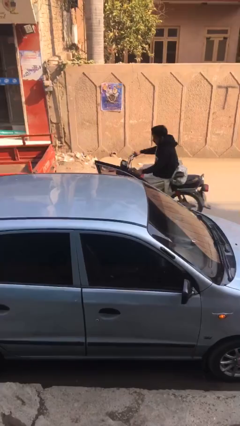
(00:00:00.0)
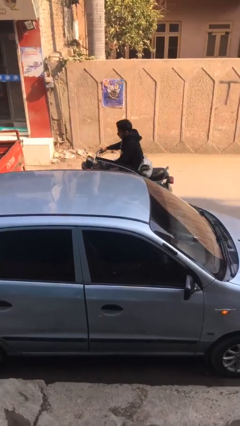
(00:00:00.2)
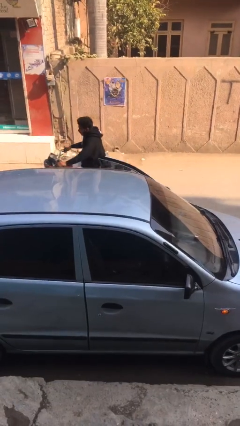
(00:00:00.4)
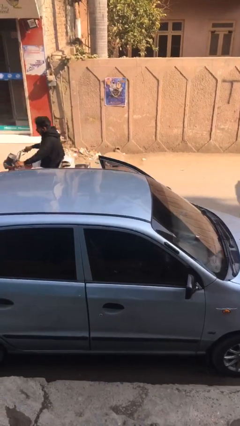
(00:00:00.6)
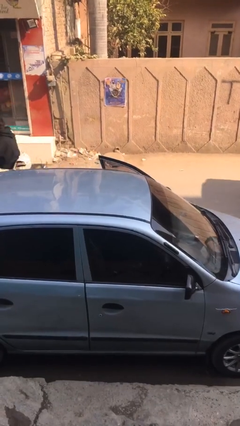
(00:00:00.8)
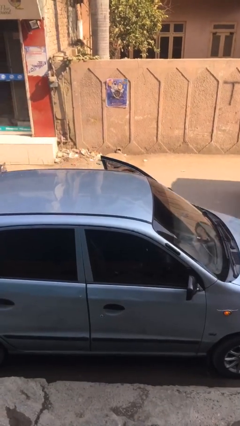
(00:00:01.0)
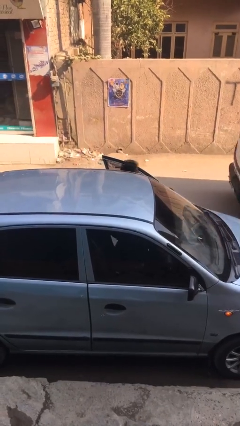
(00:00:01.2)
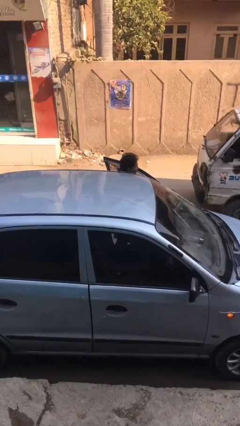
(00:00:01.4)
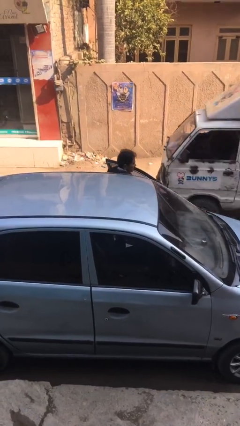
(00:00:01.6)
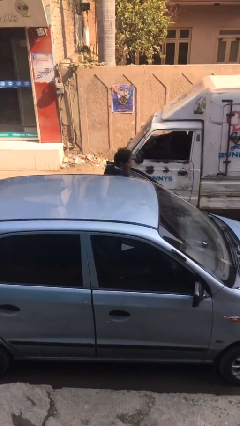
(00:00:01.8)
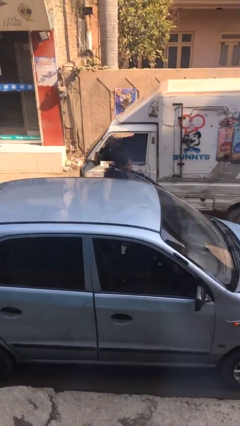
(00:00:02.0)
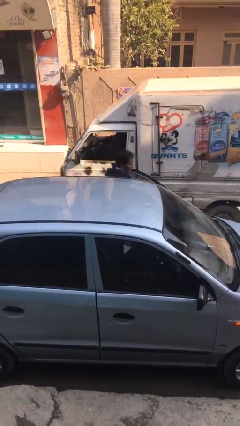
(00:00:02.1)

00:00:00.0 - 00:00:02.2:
person exits car

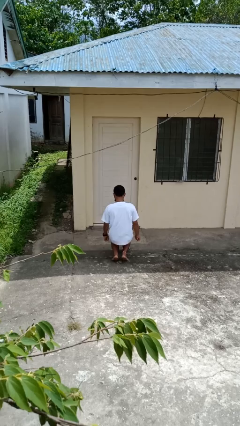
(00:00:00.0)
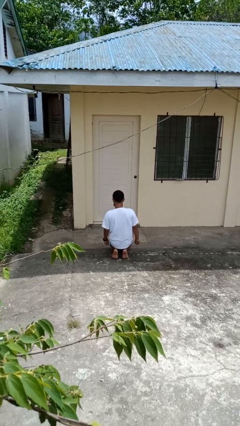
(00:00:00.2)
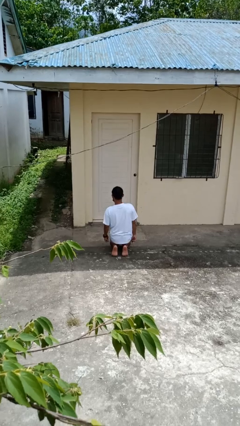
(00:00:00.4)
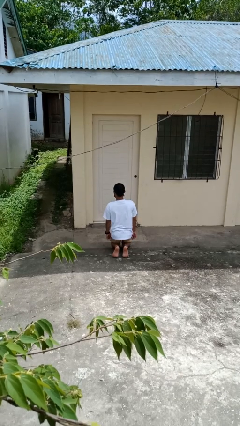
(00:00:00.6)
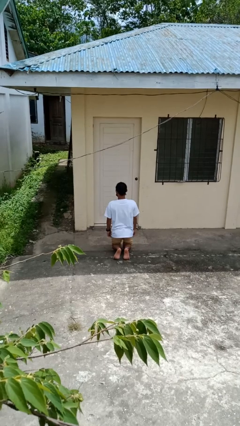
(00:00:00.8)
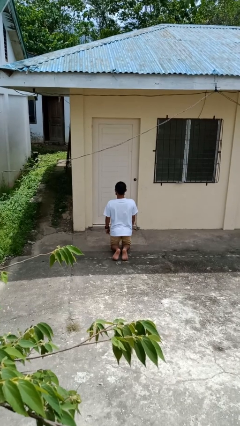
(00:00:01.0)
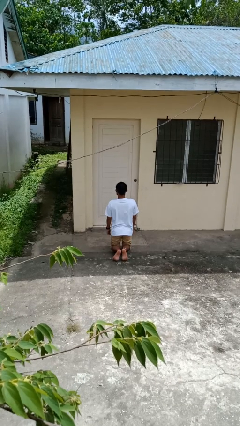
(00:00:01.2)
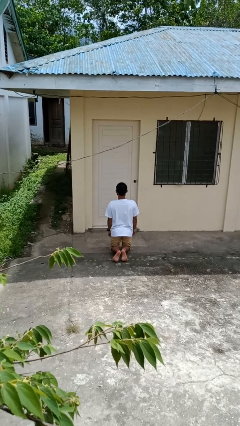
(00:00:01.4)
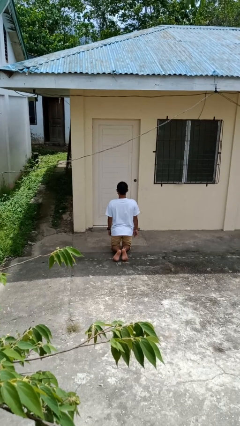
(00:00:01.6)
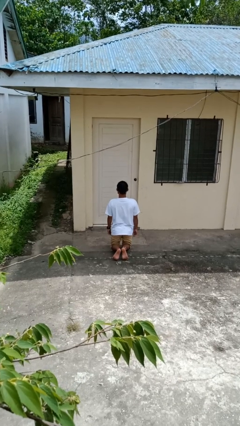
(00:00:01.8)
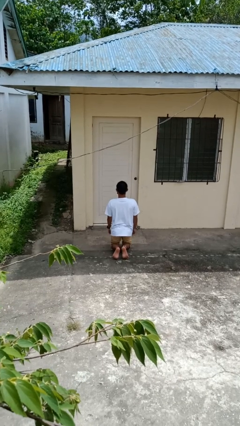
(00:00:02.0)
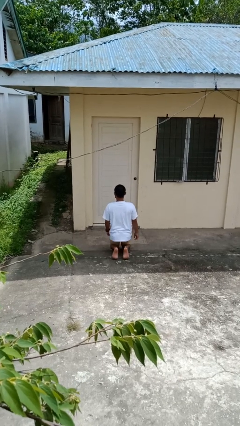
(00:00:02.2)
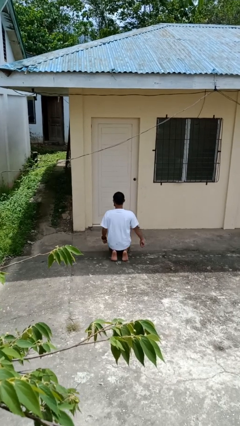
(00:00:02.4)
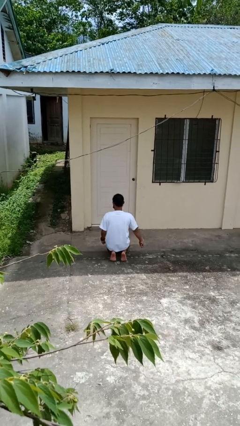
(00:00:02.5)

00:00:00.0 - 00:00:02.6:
person kneels

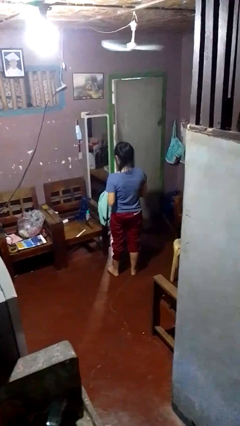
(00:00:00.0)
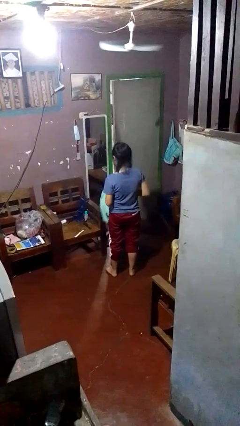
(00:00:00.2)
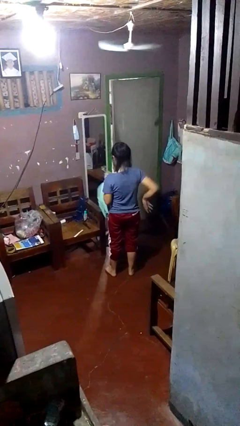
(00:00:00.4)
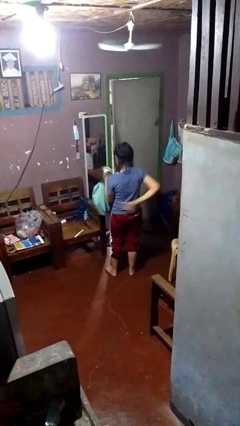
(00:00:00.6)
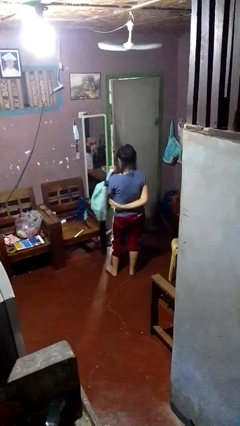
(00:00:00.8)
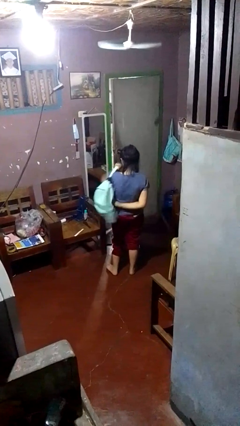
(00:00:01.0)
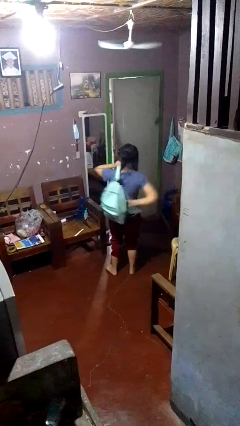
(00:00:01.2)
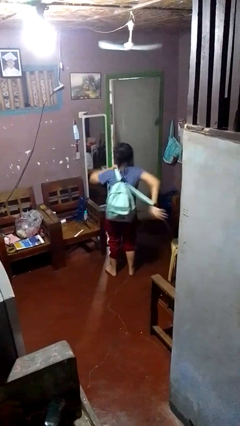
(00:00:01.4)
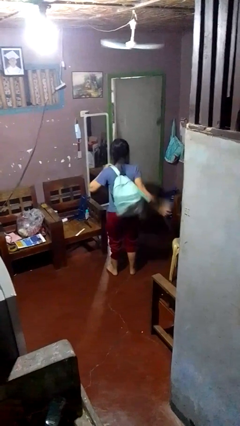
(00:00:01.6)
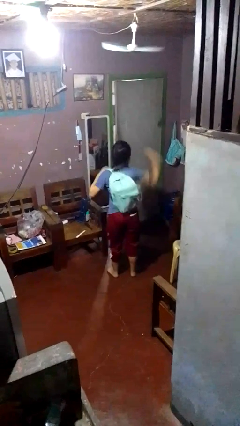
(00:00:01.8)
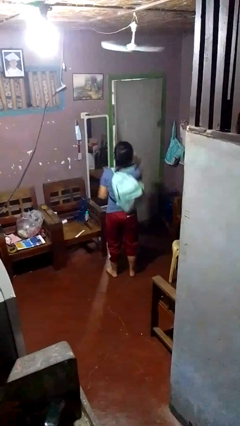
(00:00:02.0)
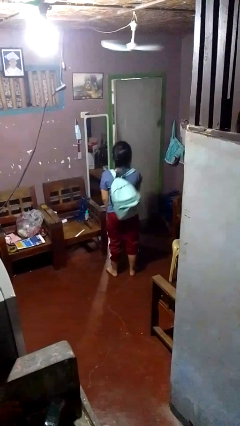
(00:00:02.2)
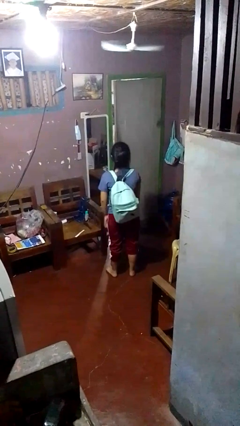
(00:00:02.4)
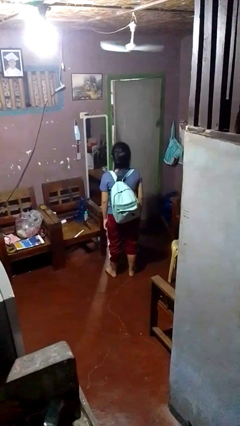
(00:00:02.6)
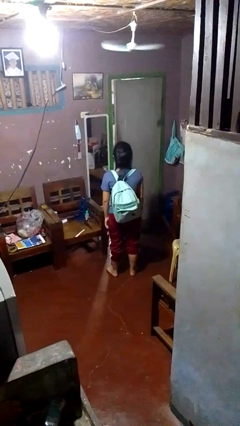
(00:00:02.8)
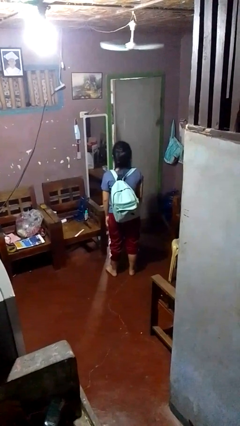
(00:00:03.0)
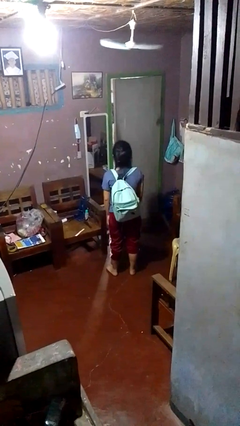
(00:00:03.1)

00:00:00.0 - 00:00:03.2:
person puts on backpack

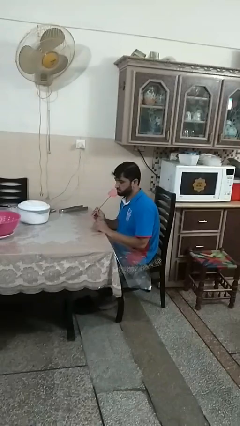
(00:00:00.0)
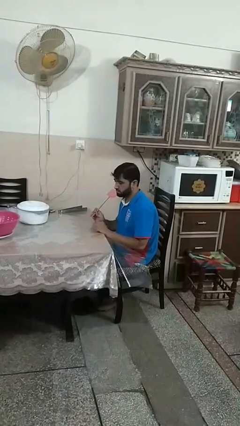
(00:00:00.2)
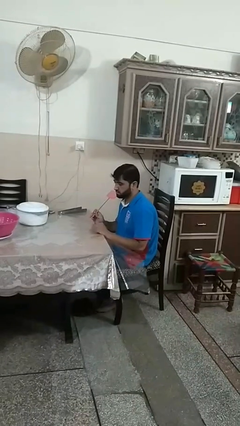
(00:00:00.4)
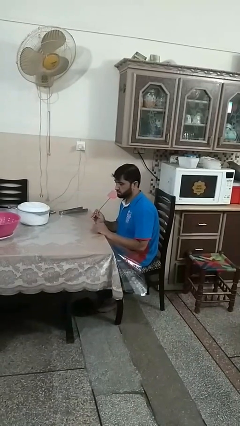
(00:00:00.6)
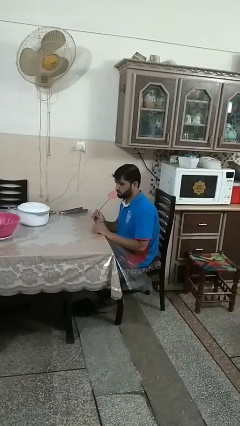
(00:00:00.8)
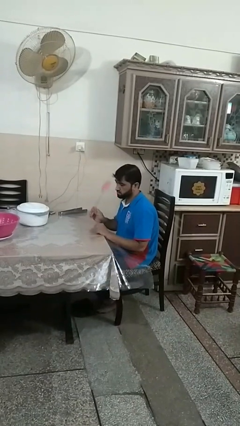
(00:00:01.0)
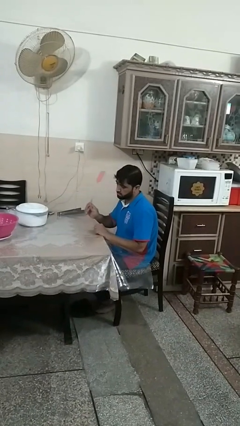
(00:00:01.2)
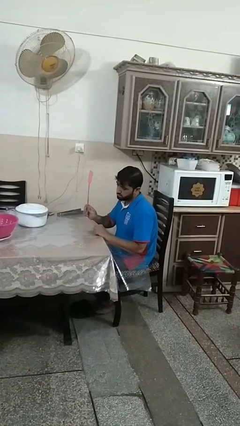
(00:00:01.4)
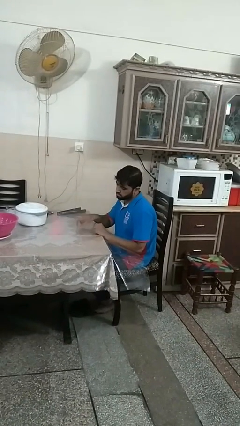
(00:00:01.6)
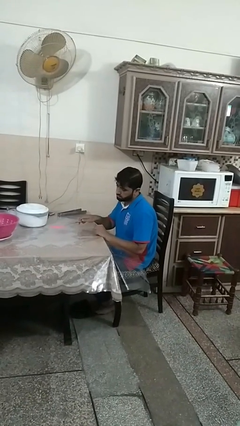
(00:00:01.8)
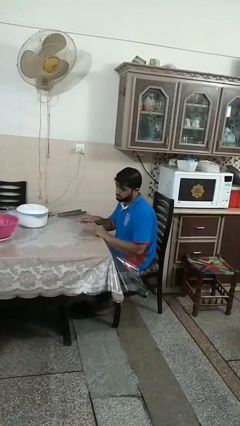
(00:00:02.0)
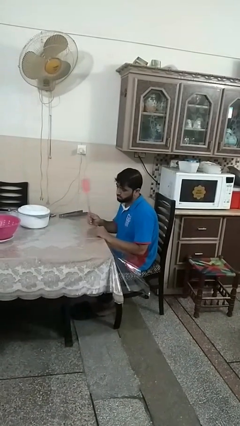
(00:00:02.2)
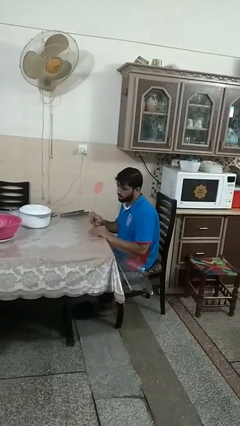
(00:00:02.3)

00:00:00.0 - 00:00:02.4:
person swats bug

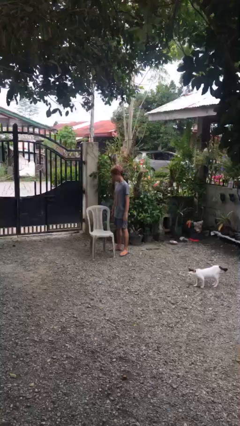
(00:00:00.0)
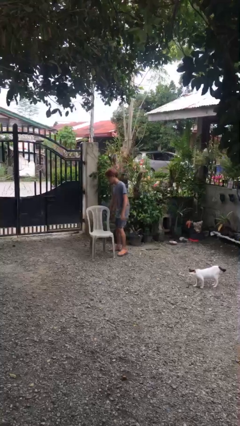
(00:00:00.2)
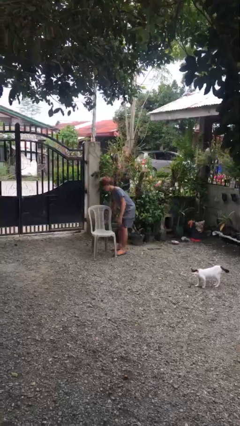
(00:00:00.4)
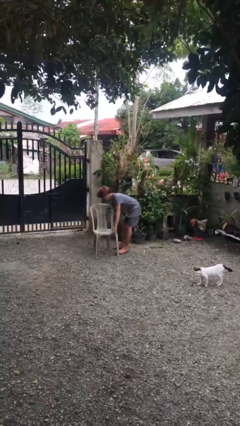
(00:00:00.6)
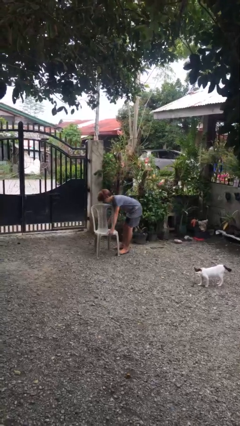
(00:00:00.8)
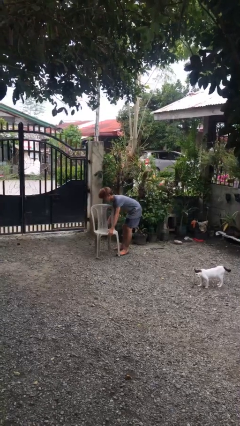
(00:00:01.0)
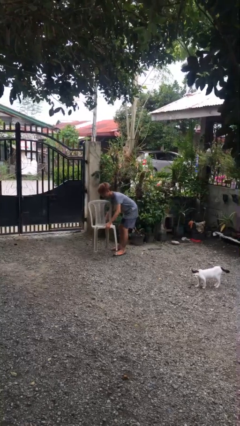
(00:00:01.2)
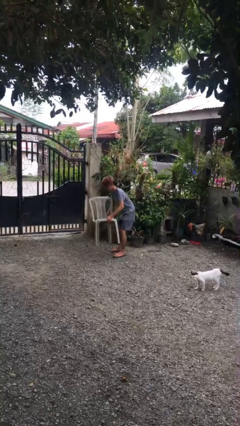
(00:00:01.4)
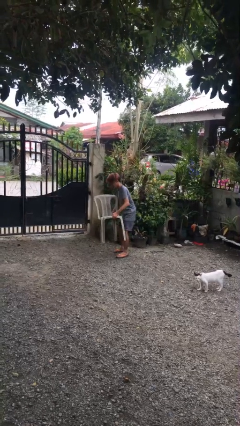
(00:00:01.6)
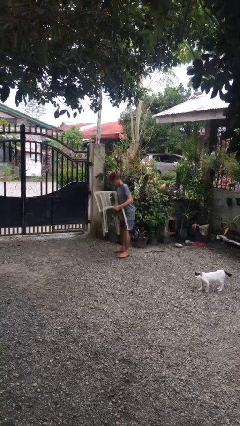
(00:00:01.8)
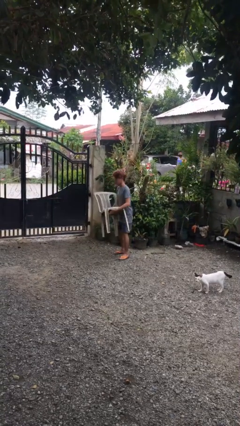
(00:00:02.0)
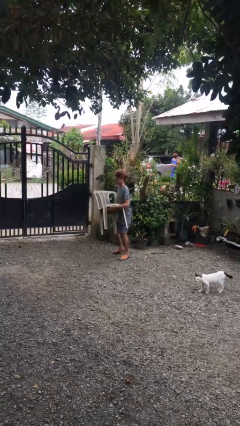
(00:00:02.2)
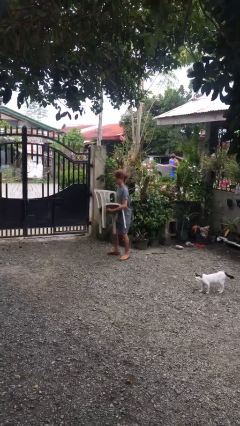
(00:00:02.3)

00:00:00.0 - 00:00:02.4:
person picks up object from floor

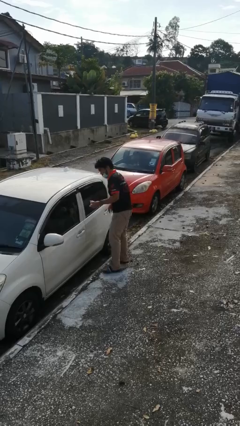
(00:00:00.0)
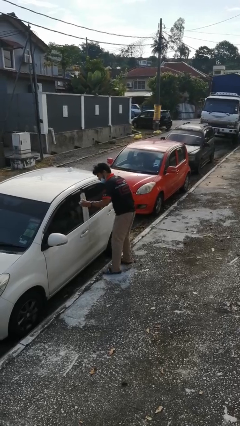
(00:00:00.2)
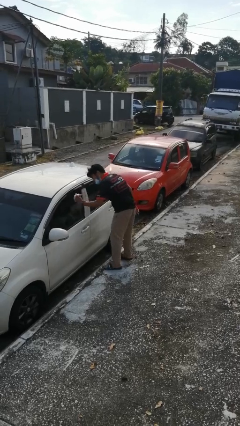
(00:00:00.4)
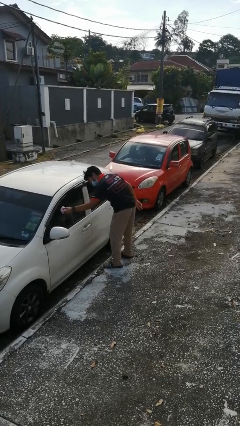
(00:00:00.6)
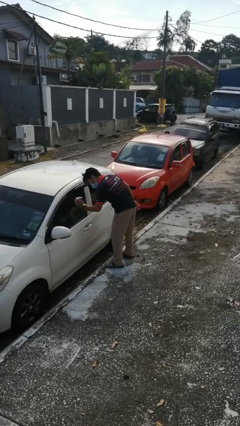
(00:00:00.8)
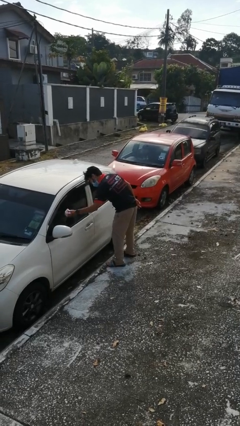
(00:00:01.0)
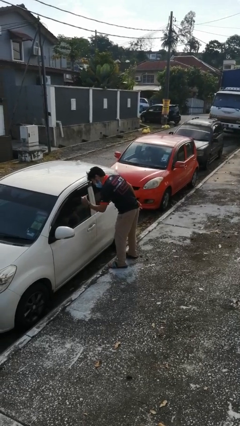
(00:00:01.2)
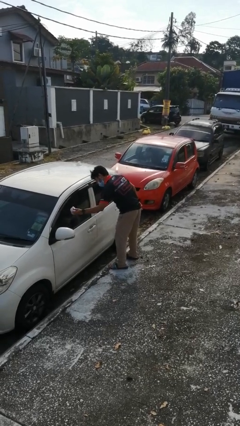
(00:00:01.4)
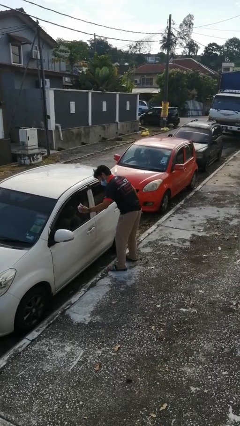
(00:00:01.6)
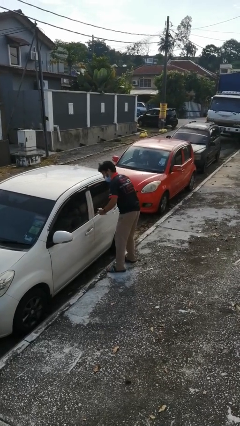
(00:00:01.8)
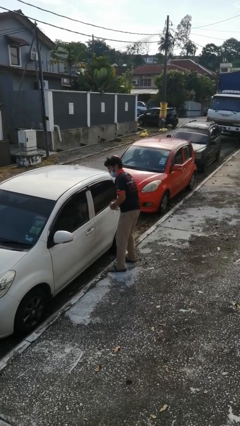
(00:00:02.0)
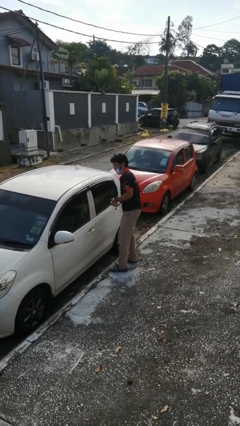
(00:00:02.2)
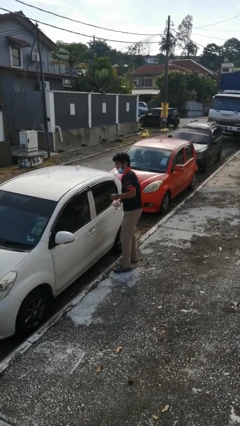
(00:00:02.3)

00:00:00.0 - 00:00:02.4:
person polishes car with rag

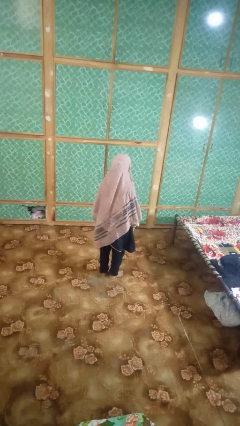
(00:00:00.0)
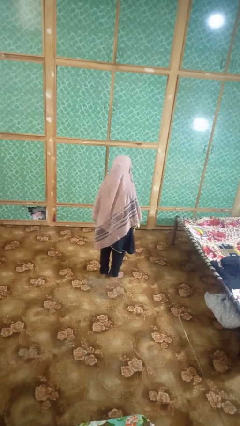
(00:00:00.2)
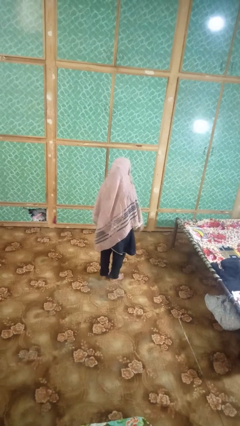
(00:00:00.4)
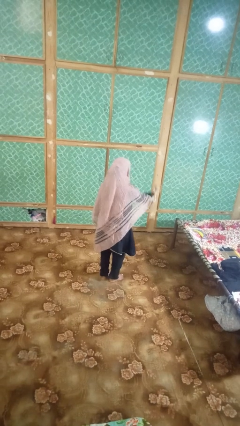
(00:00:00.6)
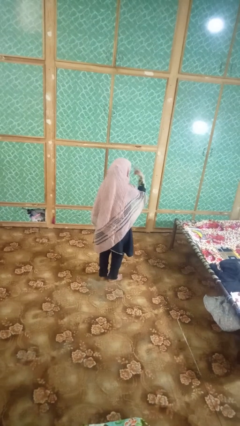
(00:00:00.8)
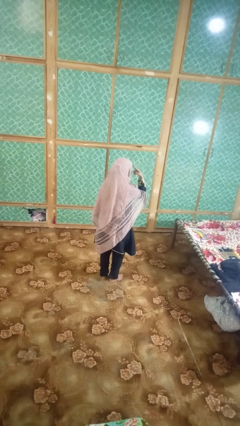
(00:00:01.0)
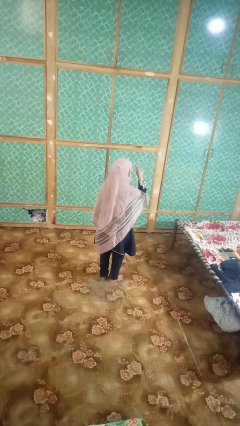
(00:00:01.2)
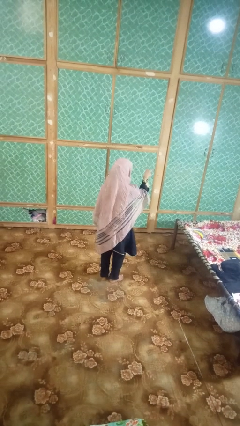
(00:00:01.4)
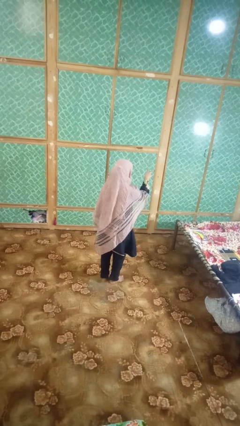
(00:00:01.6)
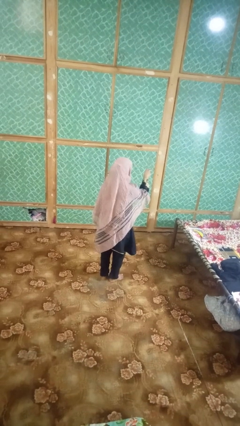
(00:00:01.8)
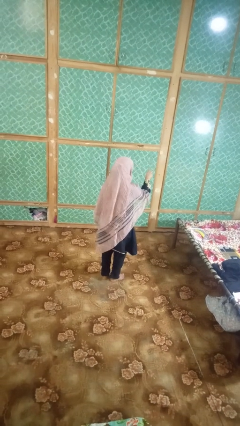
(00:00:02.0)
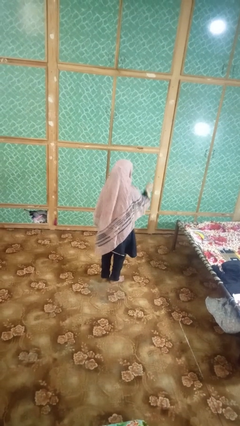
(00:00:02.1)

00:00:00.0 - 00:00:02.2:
person gestures behind me
